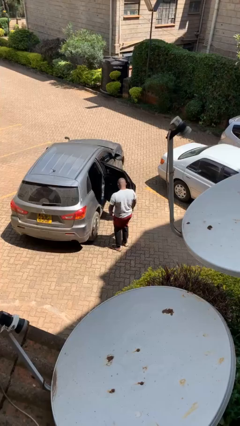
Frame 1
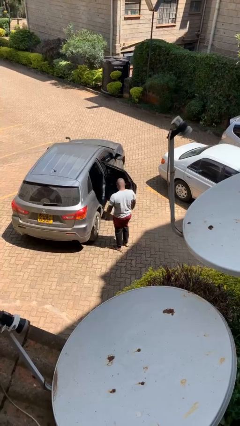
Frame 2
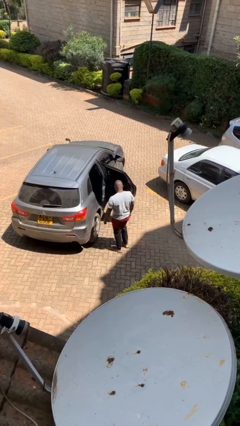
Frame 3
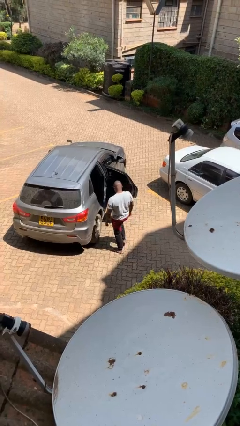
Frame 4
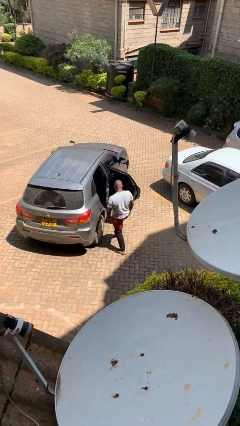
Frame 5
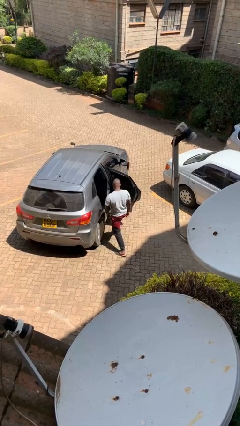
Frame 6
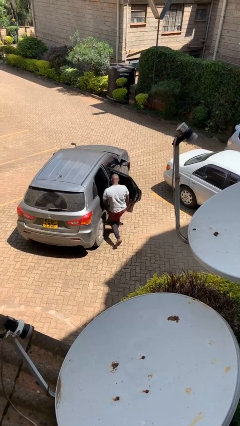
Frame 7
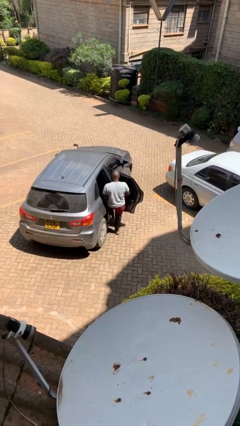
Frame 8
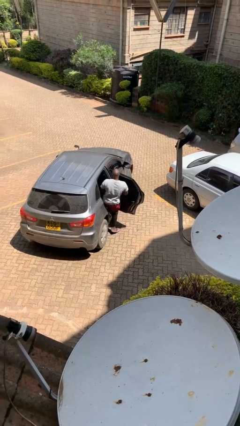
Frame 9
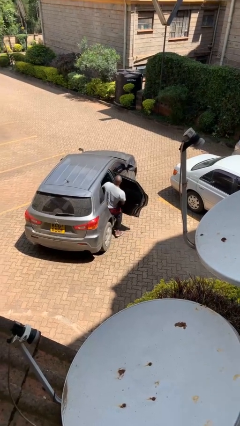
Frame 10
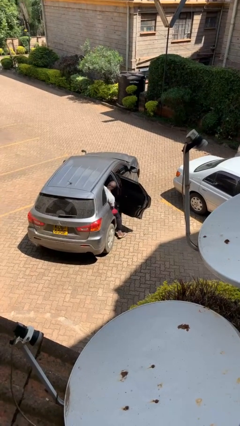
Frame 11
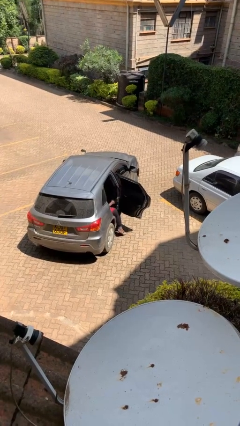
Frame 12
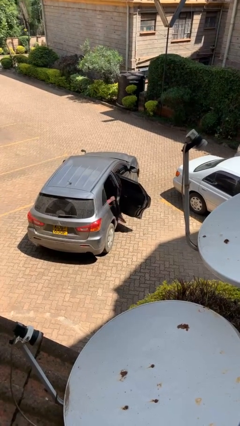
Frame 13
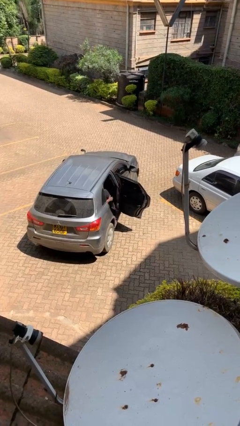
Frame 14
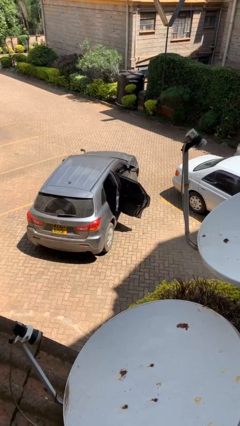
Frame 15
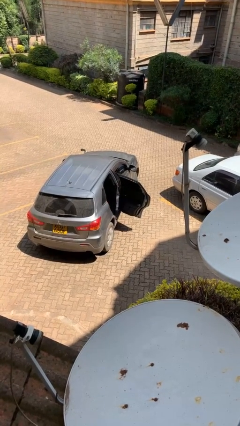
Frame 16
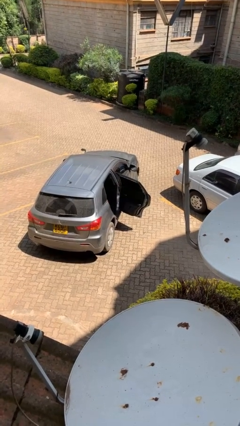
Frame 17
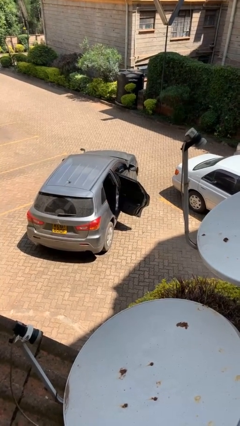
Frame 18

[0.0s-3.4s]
person enters car

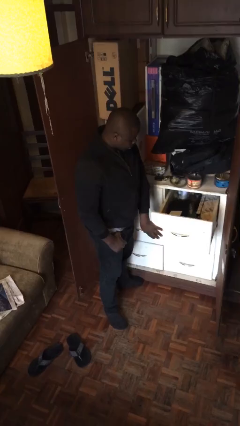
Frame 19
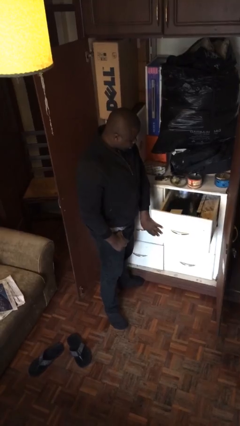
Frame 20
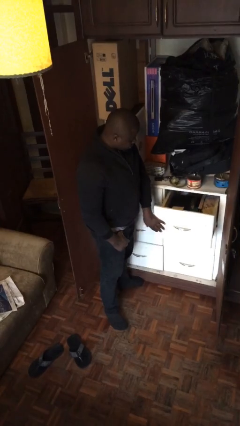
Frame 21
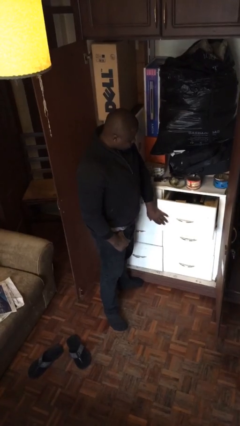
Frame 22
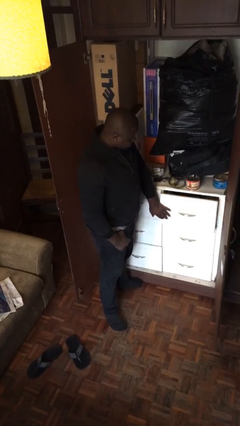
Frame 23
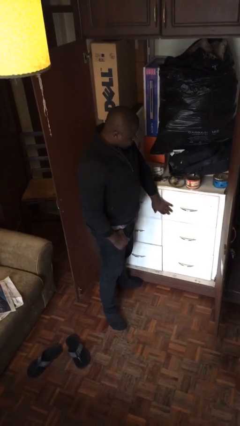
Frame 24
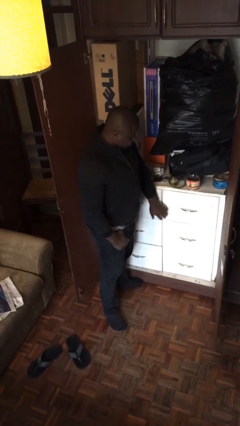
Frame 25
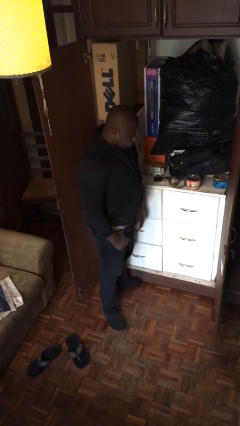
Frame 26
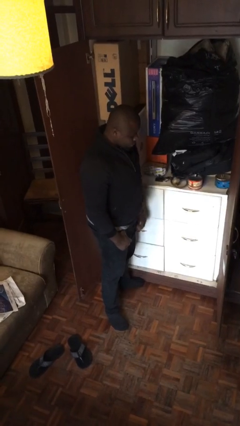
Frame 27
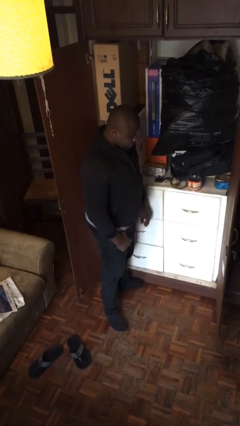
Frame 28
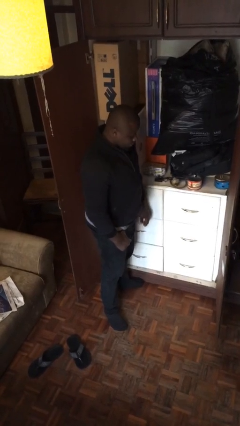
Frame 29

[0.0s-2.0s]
person closes dresser drawer

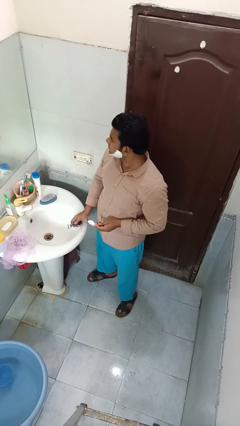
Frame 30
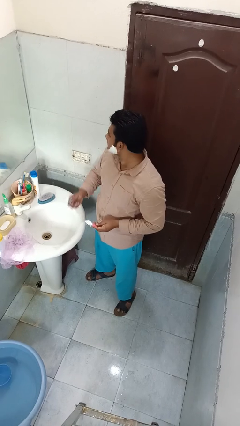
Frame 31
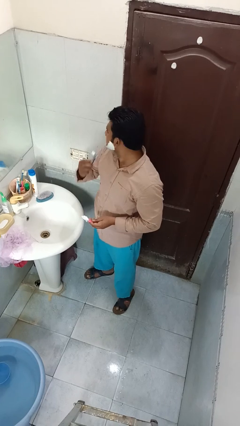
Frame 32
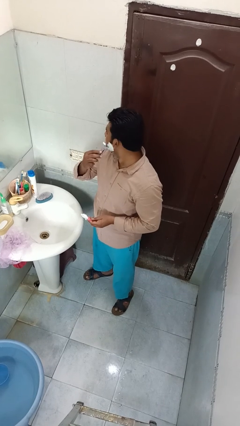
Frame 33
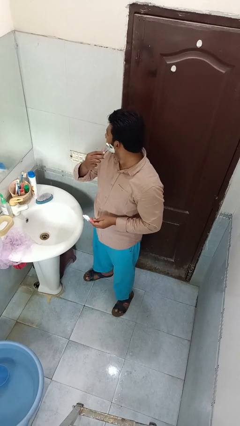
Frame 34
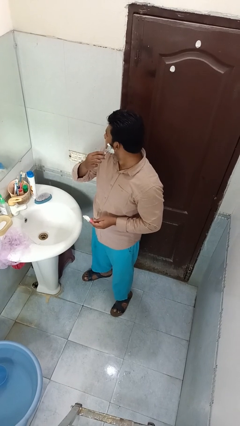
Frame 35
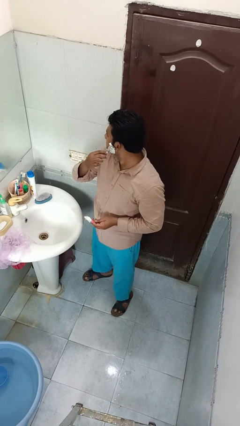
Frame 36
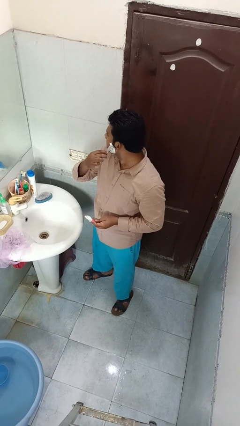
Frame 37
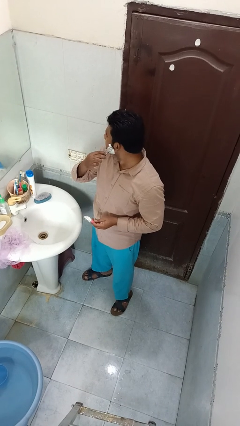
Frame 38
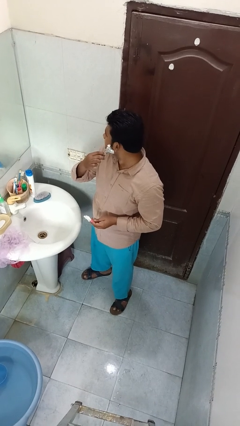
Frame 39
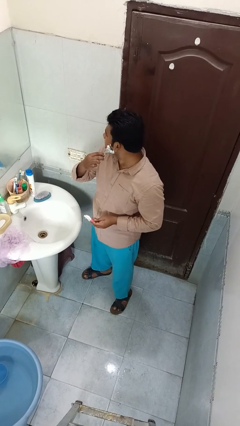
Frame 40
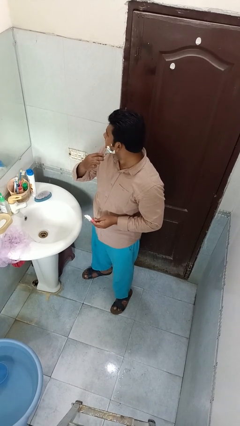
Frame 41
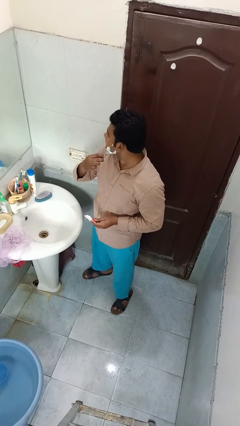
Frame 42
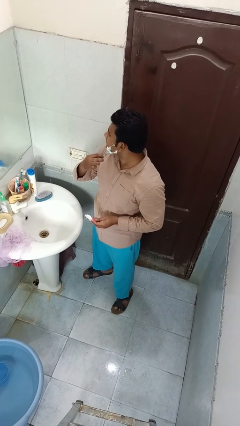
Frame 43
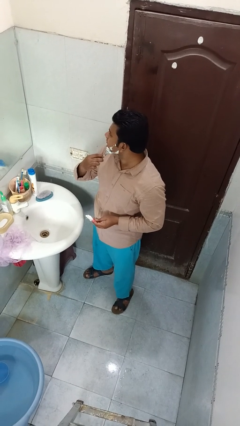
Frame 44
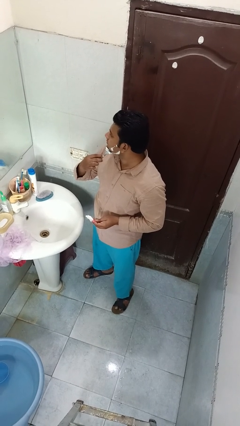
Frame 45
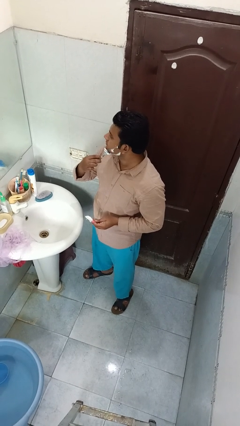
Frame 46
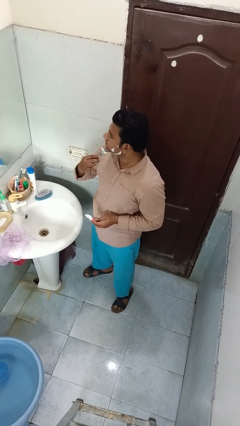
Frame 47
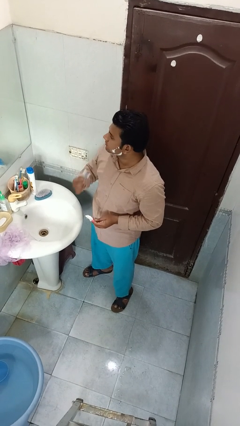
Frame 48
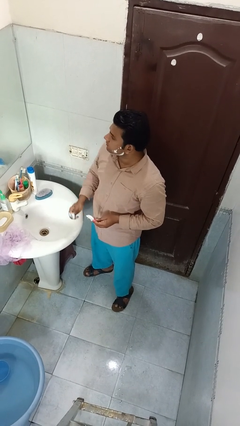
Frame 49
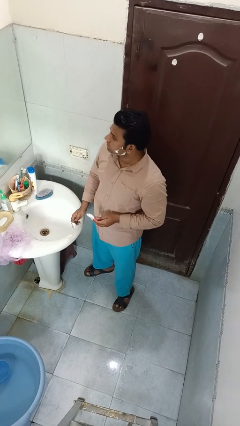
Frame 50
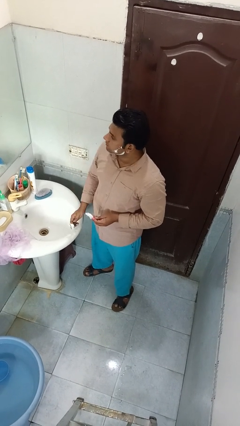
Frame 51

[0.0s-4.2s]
person shaves face

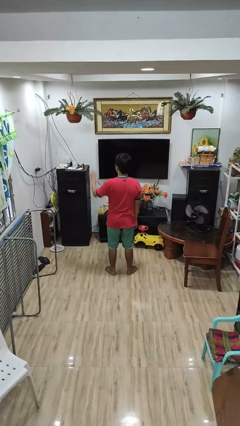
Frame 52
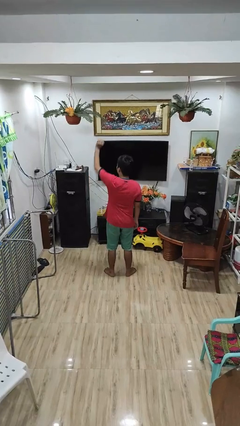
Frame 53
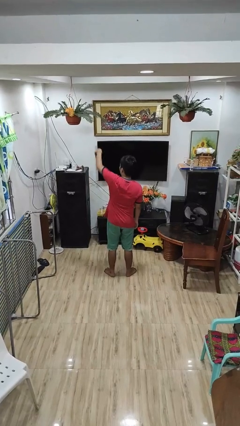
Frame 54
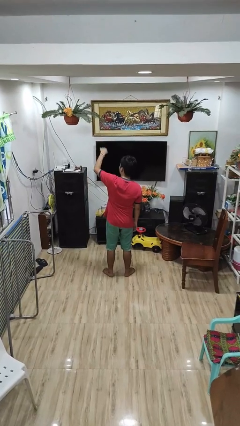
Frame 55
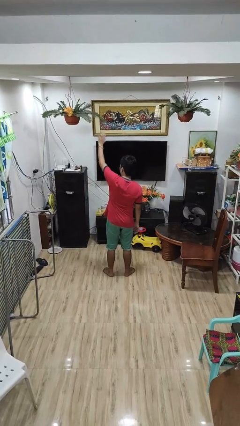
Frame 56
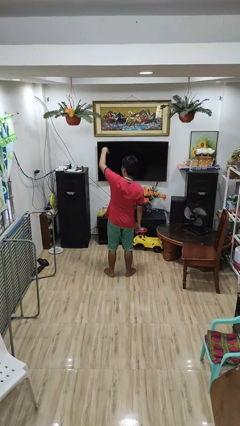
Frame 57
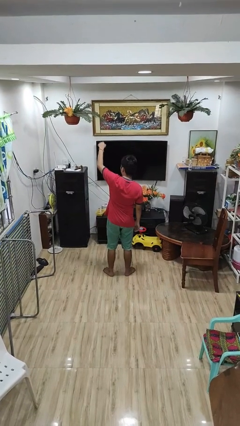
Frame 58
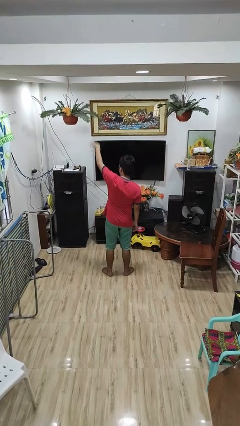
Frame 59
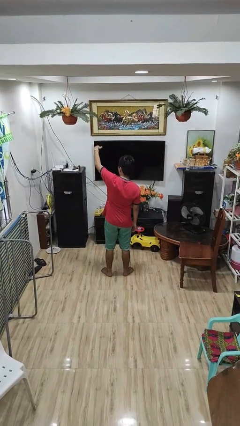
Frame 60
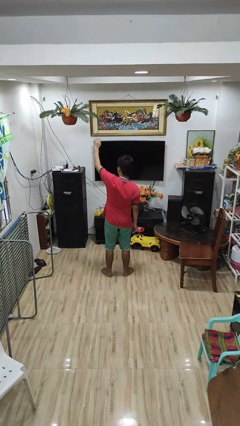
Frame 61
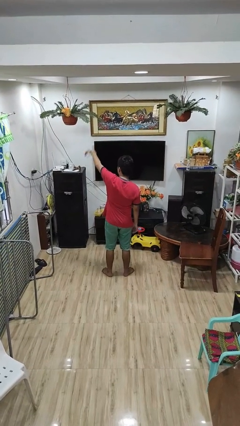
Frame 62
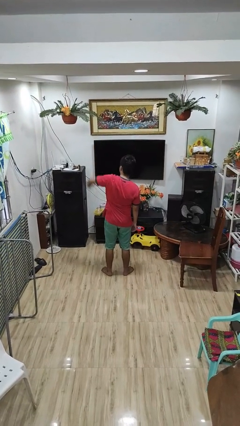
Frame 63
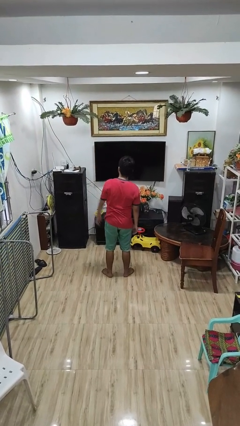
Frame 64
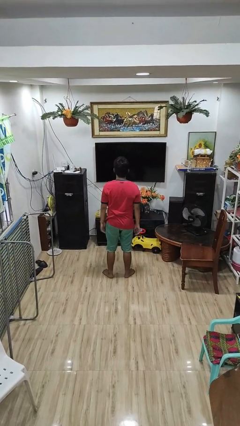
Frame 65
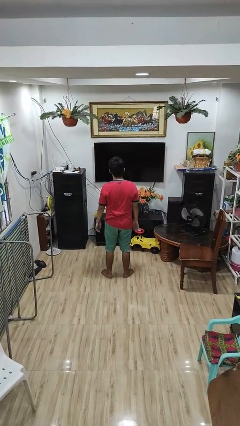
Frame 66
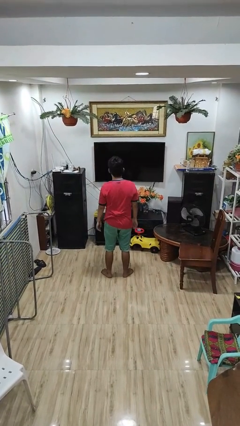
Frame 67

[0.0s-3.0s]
person gestures come here

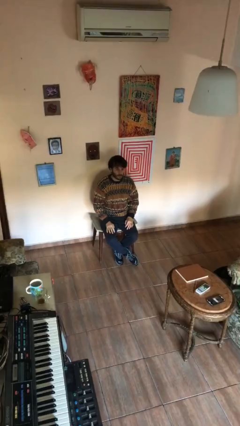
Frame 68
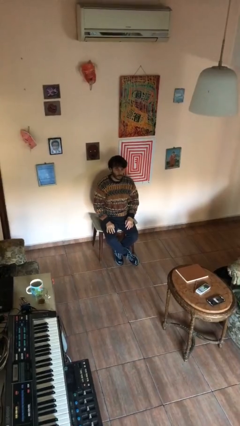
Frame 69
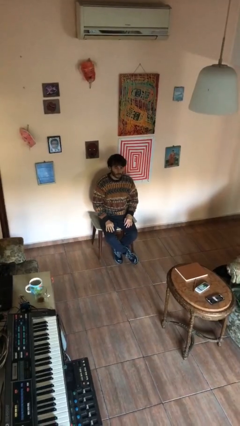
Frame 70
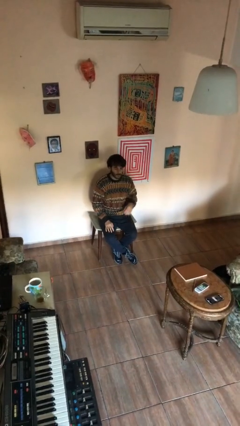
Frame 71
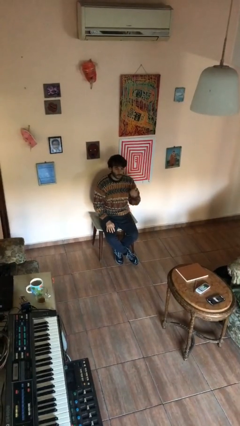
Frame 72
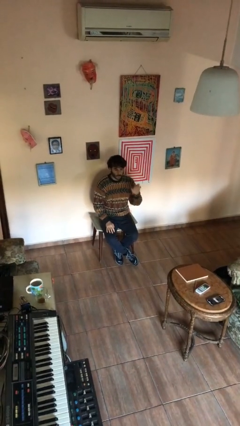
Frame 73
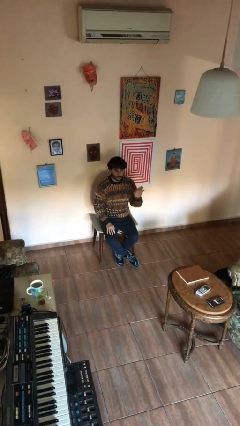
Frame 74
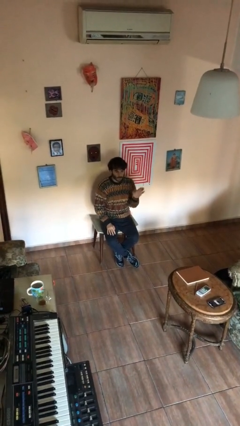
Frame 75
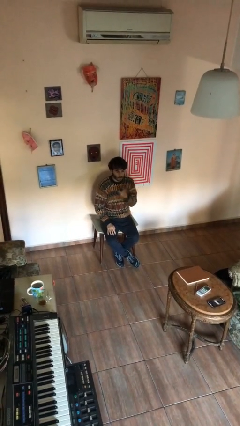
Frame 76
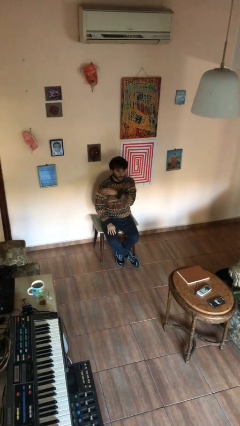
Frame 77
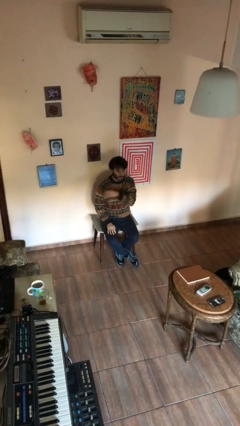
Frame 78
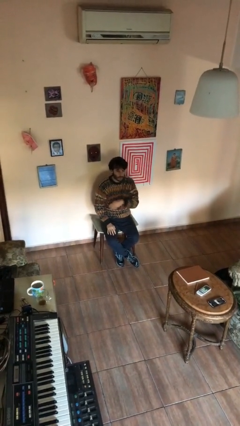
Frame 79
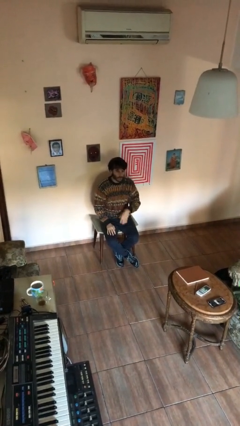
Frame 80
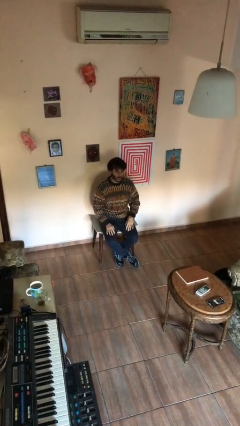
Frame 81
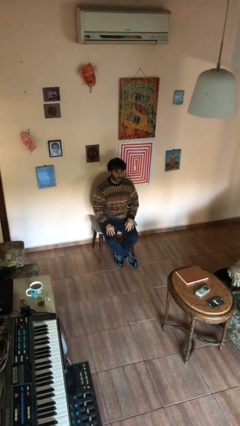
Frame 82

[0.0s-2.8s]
person gestures swipe right

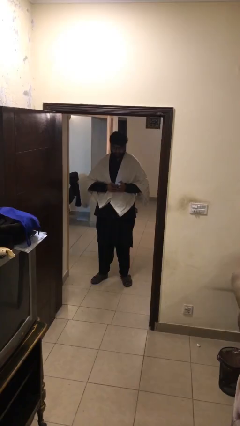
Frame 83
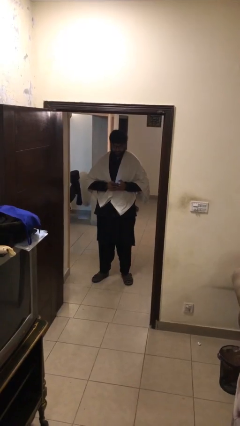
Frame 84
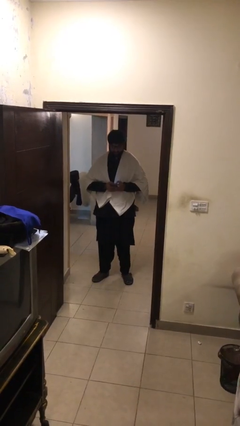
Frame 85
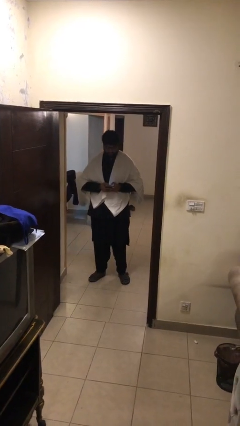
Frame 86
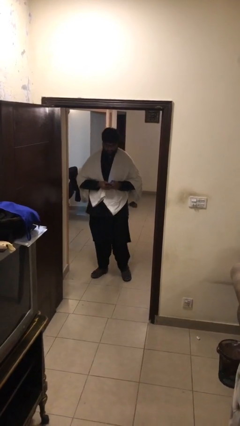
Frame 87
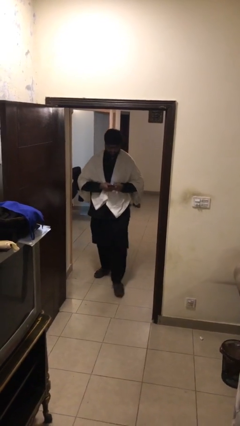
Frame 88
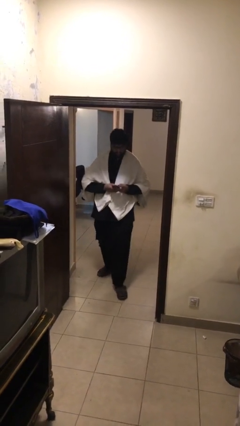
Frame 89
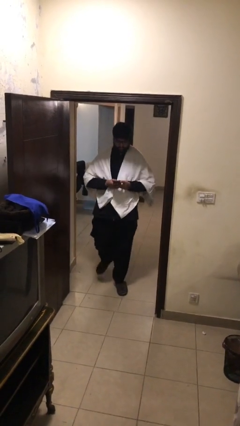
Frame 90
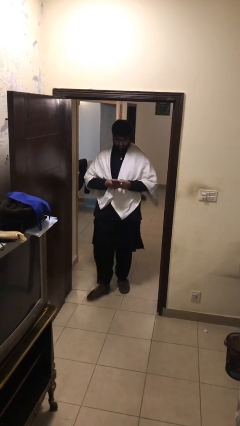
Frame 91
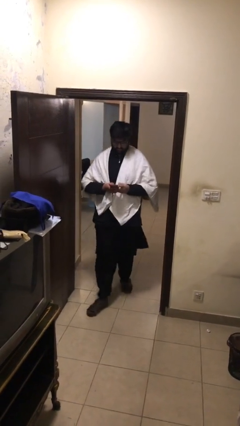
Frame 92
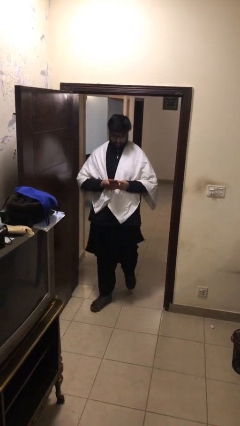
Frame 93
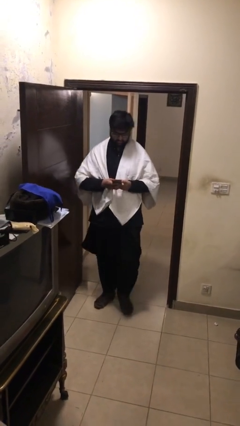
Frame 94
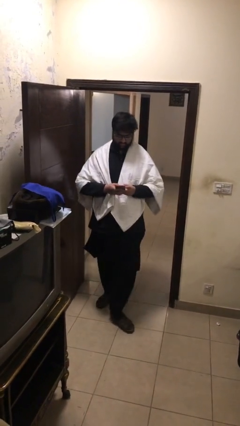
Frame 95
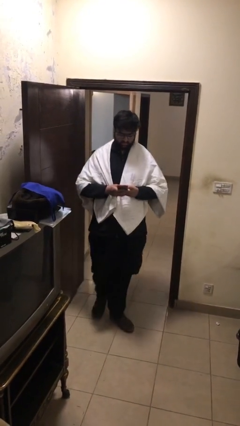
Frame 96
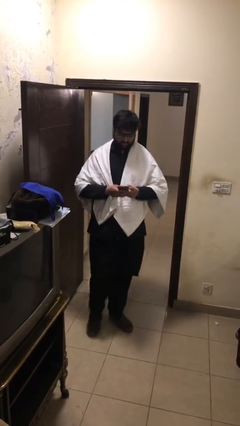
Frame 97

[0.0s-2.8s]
person enters scene through structure
